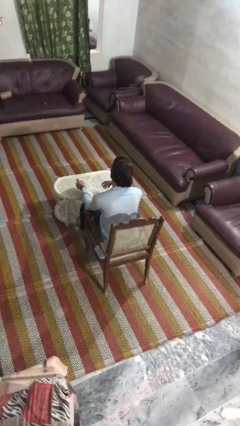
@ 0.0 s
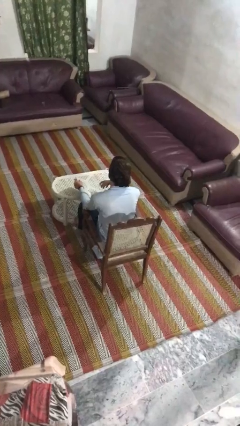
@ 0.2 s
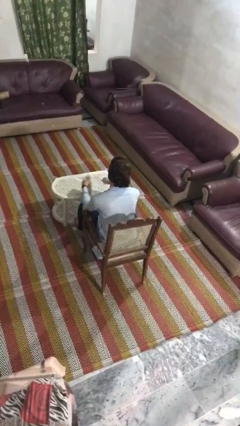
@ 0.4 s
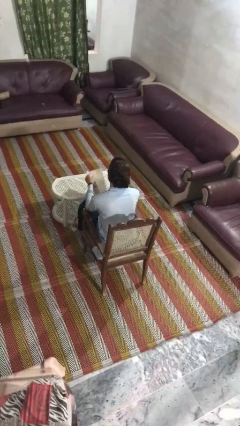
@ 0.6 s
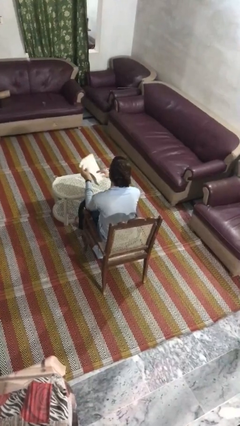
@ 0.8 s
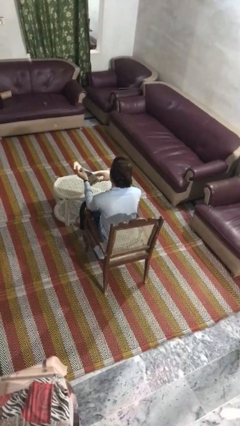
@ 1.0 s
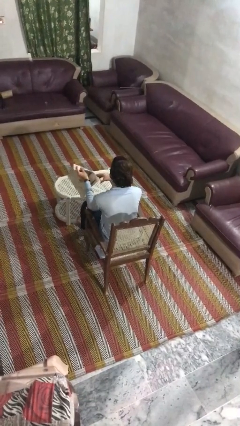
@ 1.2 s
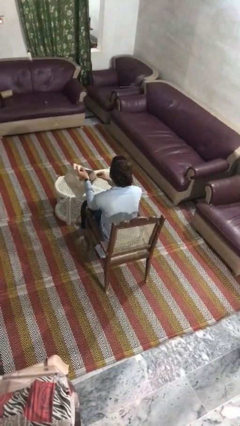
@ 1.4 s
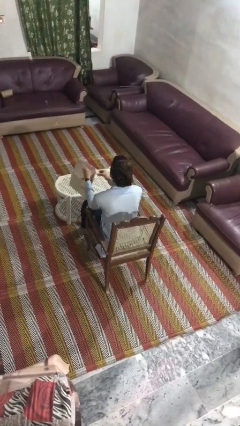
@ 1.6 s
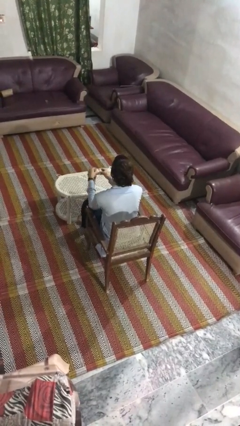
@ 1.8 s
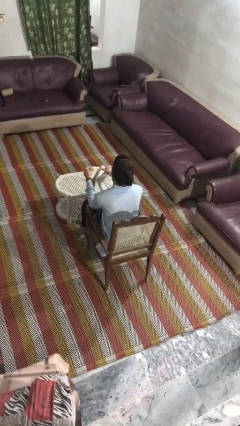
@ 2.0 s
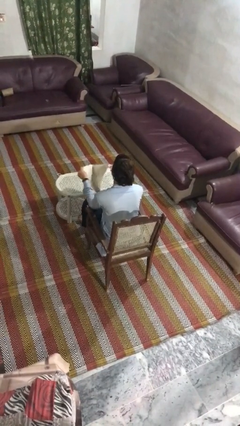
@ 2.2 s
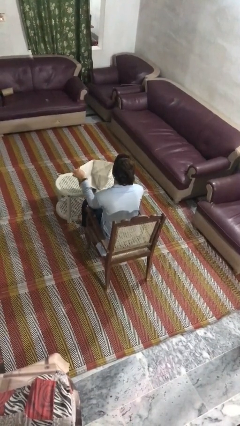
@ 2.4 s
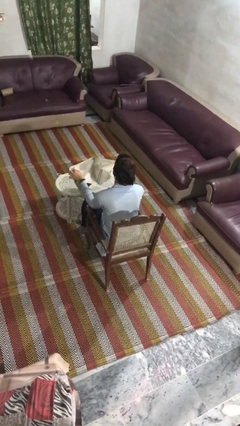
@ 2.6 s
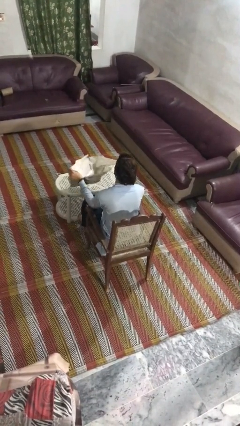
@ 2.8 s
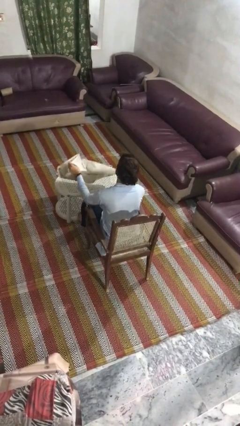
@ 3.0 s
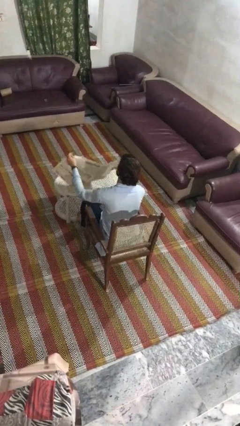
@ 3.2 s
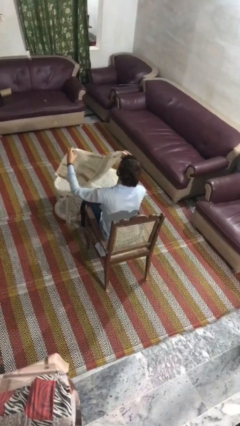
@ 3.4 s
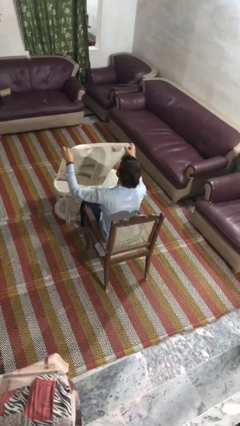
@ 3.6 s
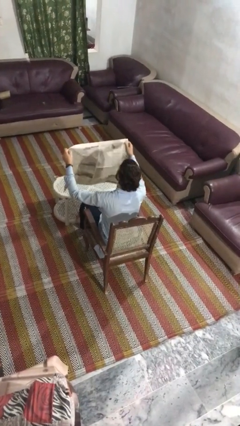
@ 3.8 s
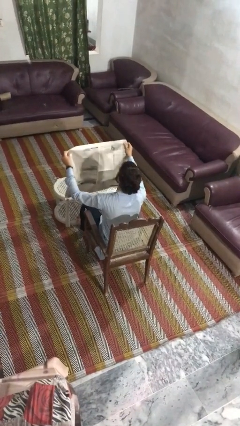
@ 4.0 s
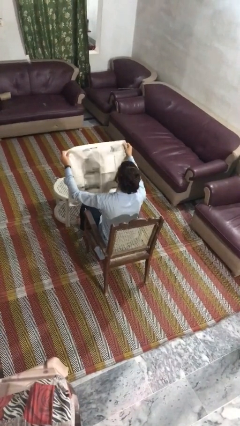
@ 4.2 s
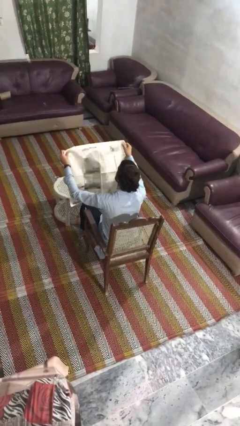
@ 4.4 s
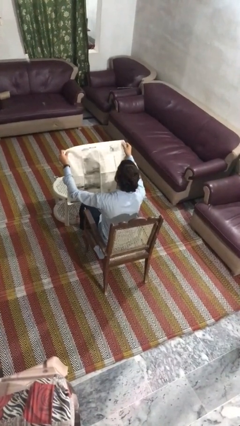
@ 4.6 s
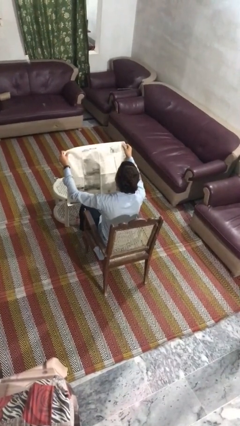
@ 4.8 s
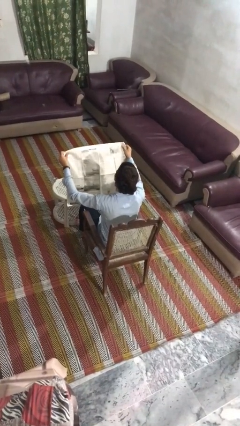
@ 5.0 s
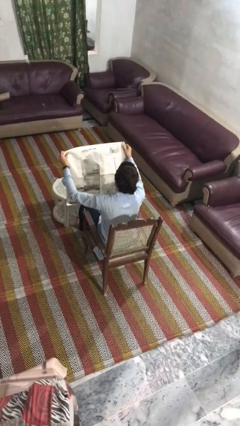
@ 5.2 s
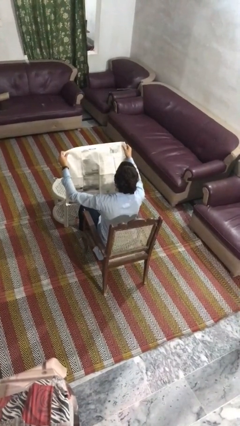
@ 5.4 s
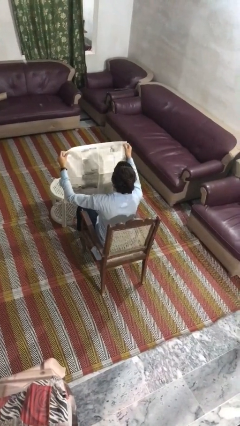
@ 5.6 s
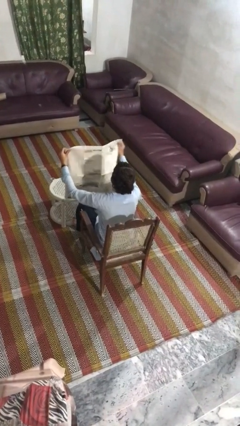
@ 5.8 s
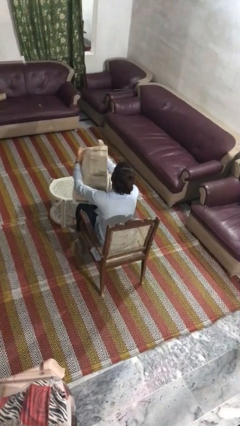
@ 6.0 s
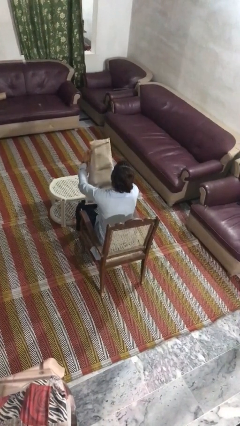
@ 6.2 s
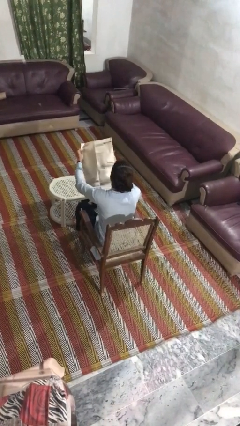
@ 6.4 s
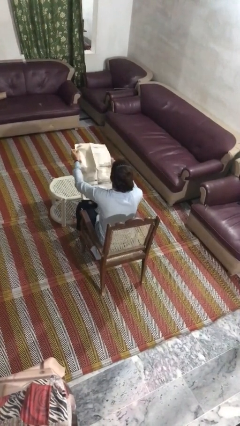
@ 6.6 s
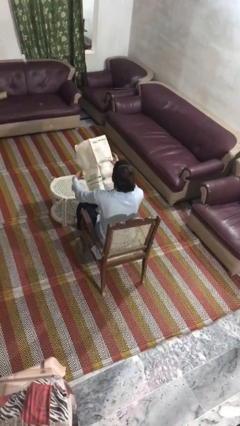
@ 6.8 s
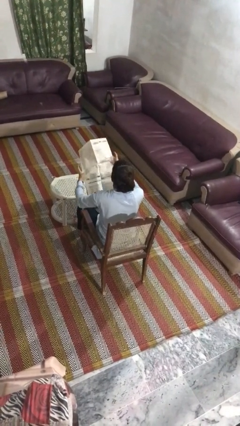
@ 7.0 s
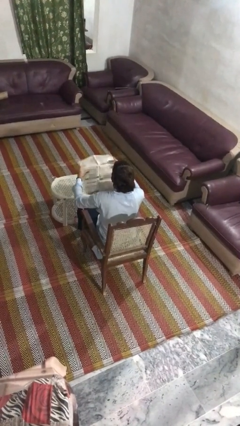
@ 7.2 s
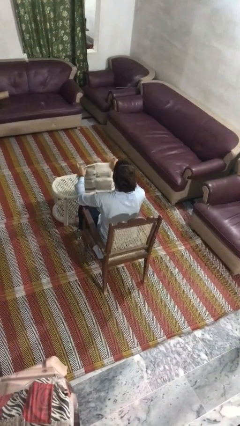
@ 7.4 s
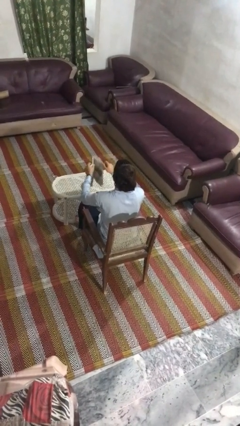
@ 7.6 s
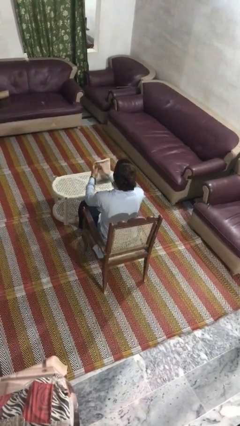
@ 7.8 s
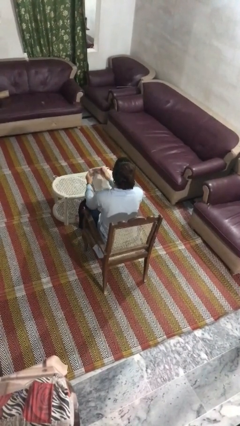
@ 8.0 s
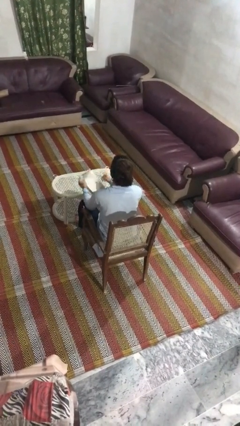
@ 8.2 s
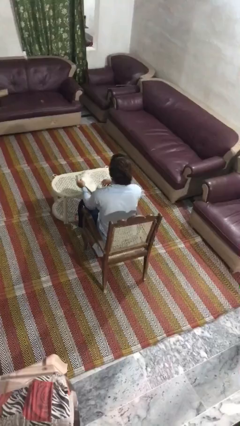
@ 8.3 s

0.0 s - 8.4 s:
person reads newspaper

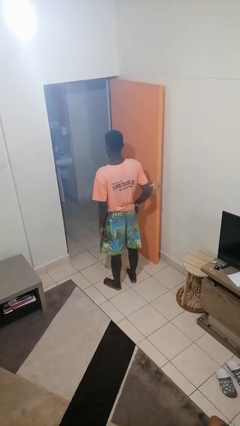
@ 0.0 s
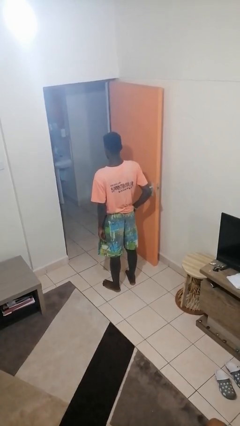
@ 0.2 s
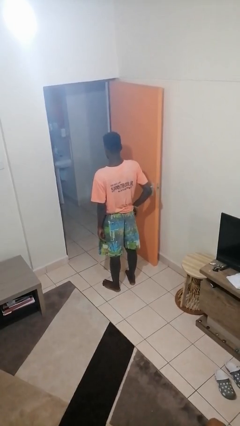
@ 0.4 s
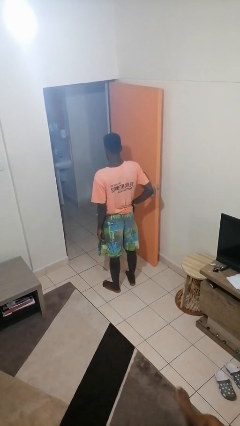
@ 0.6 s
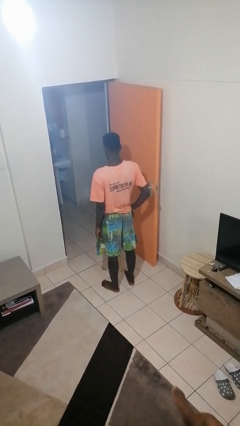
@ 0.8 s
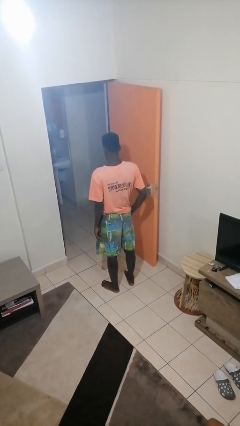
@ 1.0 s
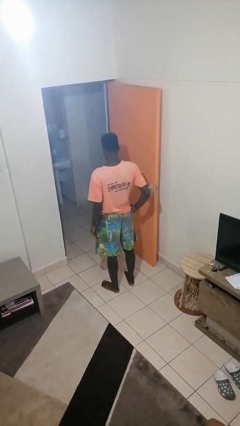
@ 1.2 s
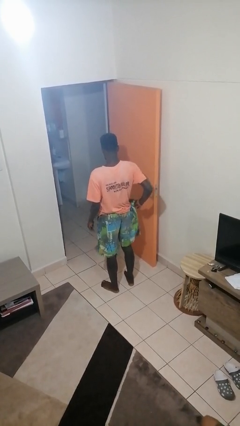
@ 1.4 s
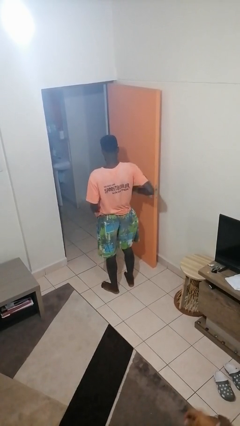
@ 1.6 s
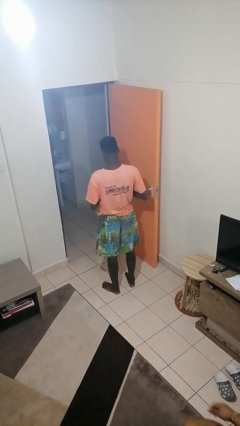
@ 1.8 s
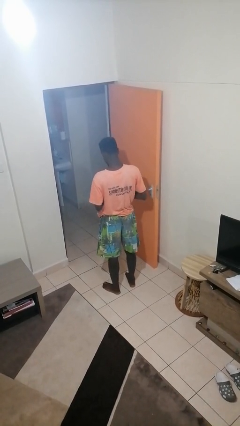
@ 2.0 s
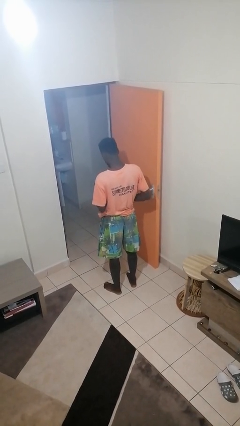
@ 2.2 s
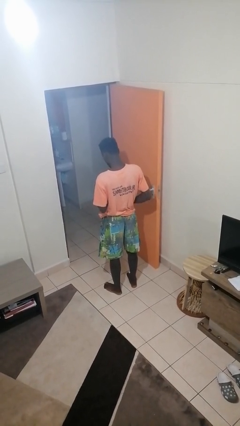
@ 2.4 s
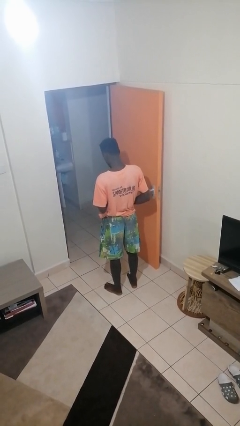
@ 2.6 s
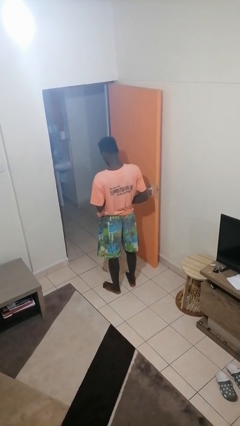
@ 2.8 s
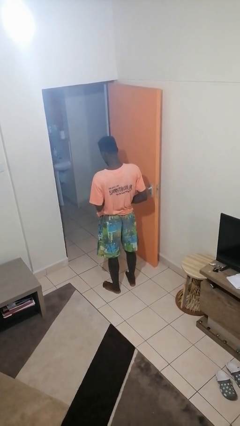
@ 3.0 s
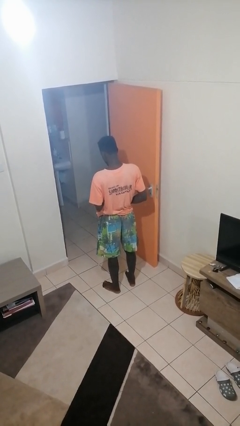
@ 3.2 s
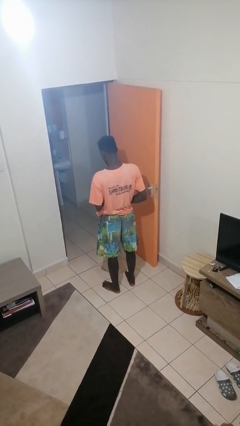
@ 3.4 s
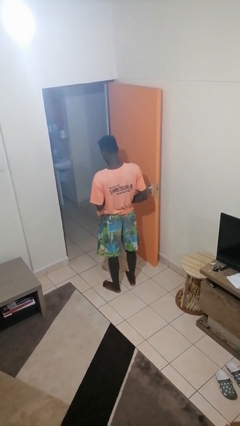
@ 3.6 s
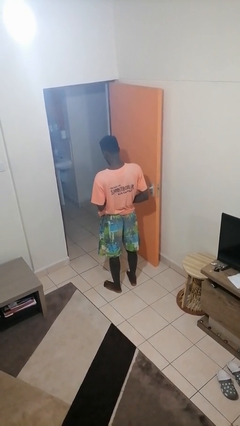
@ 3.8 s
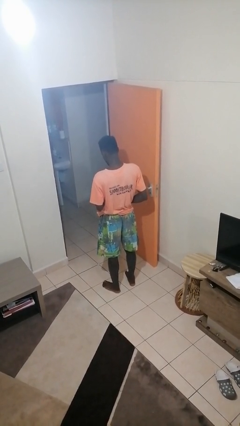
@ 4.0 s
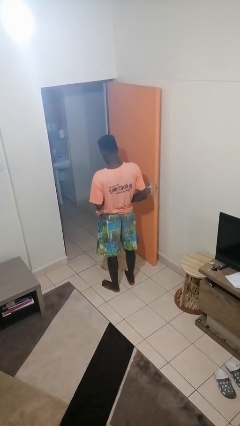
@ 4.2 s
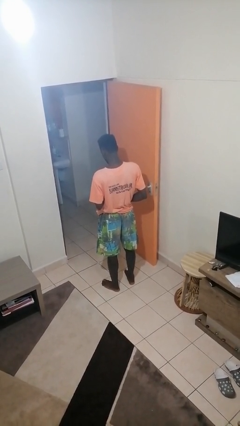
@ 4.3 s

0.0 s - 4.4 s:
person takes phone from pocket

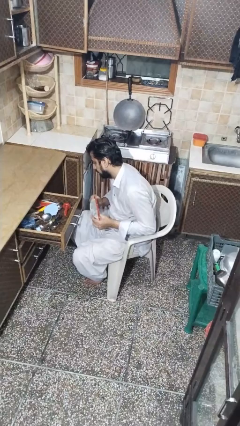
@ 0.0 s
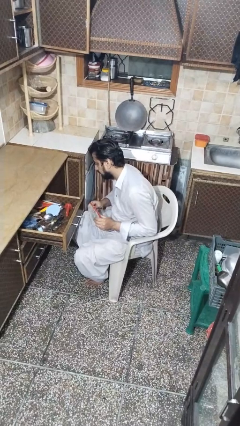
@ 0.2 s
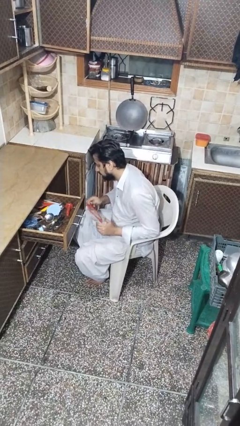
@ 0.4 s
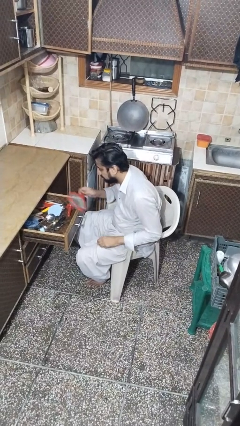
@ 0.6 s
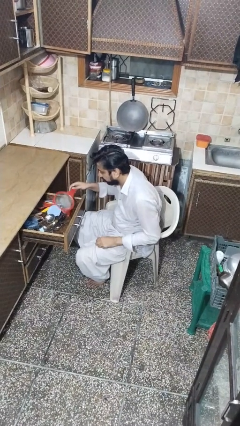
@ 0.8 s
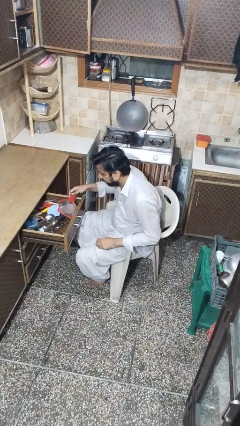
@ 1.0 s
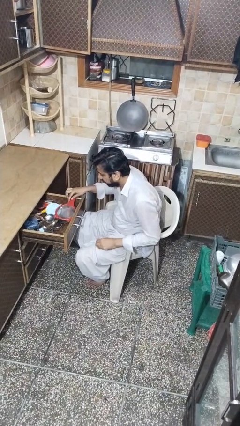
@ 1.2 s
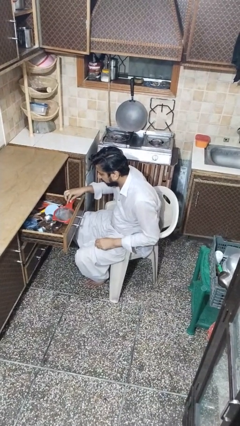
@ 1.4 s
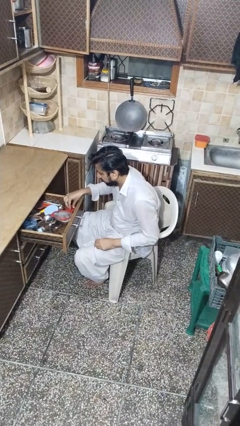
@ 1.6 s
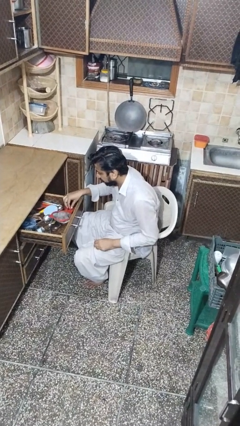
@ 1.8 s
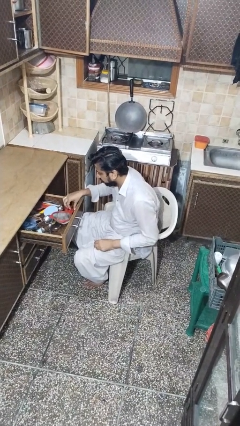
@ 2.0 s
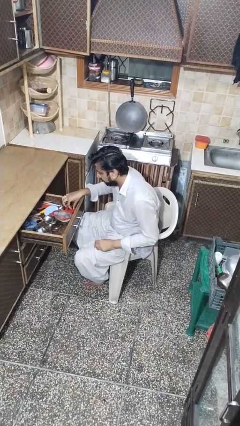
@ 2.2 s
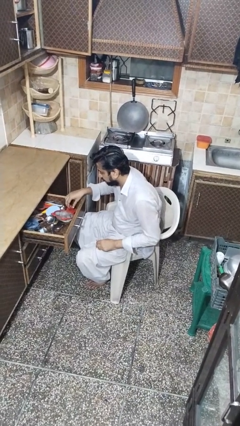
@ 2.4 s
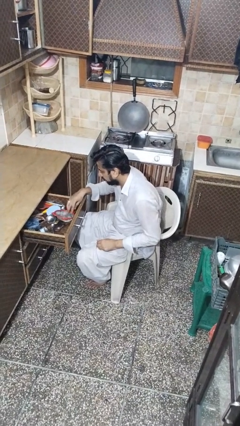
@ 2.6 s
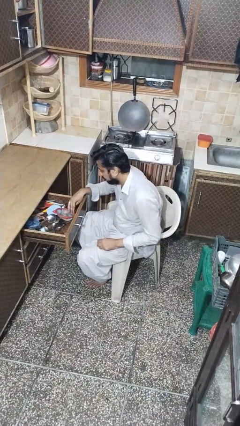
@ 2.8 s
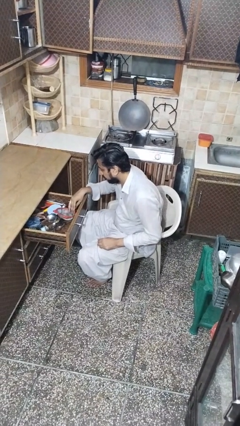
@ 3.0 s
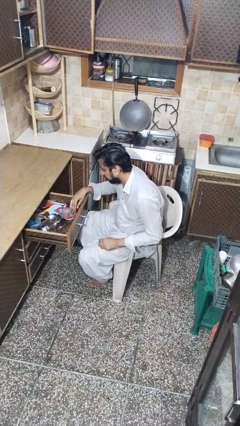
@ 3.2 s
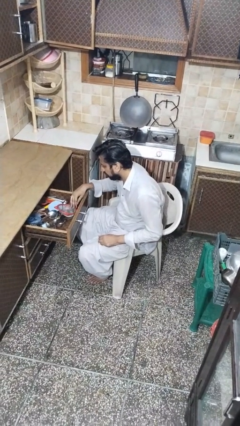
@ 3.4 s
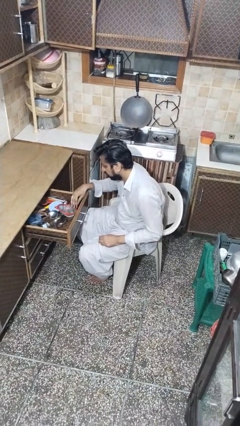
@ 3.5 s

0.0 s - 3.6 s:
person puts object into kitchen drawer

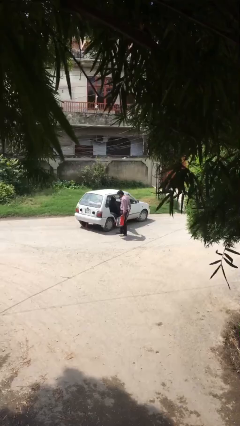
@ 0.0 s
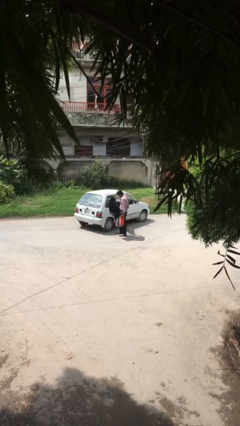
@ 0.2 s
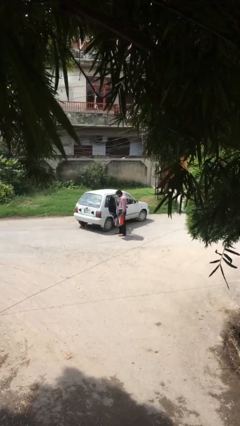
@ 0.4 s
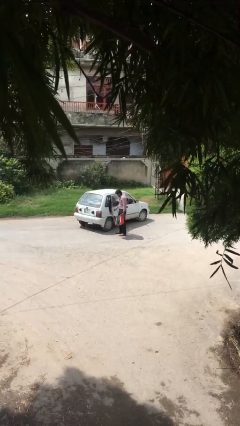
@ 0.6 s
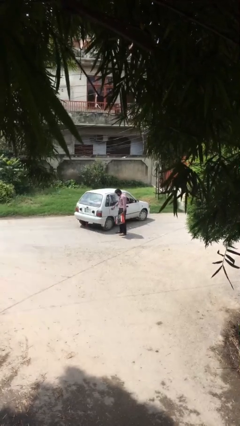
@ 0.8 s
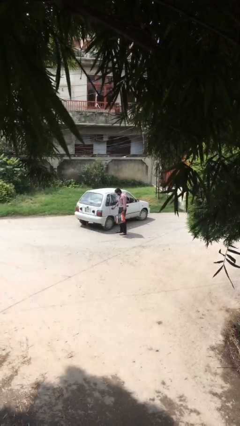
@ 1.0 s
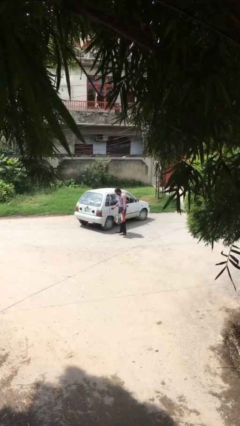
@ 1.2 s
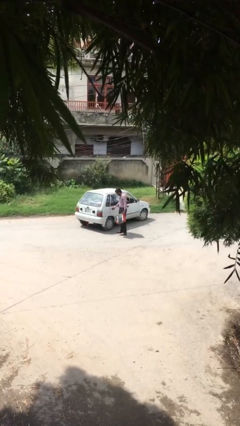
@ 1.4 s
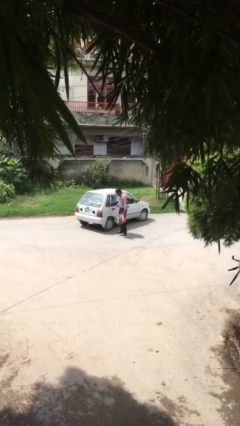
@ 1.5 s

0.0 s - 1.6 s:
person closes car door
